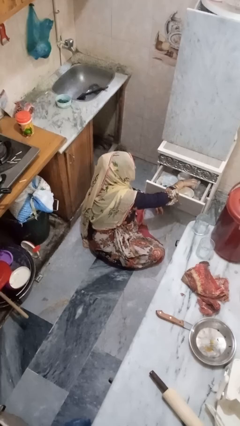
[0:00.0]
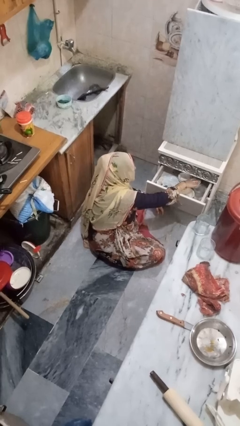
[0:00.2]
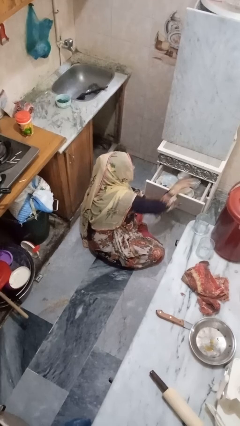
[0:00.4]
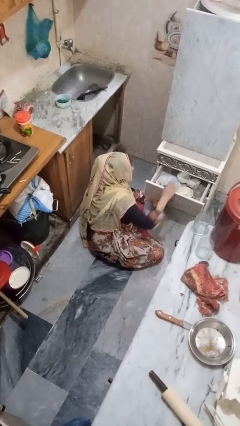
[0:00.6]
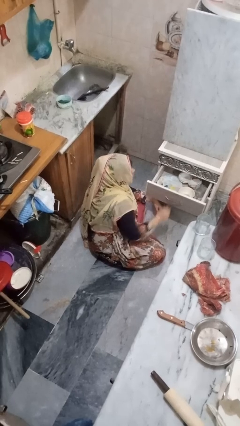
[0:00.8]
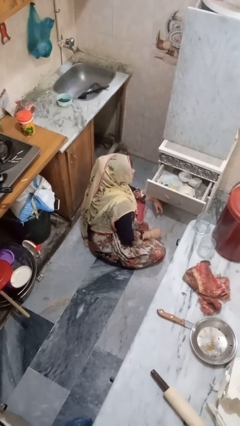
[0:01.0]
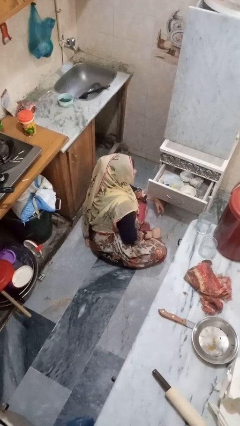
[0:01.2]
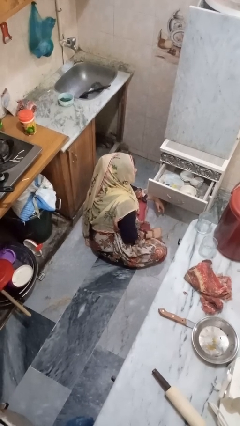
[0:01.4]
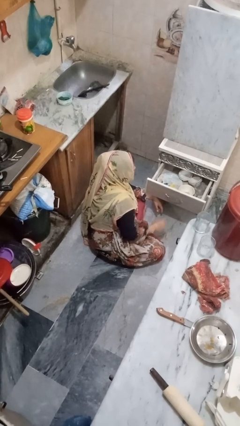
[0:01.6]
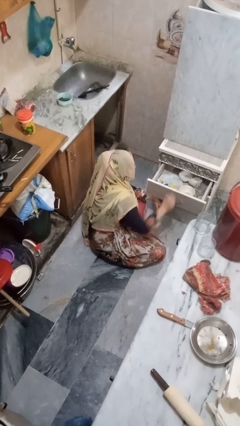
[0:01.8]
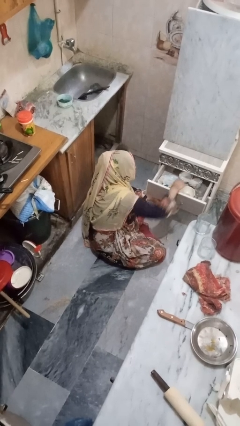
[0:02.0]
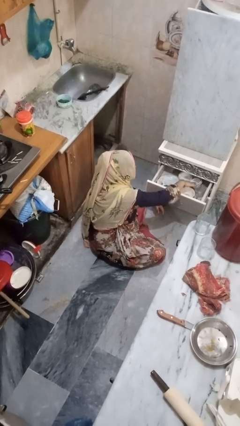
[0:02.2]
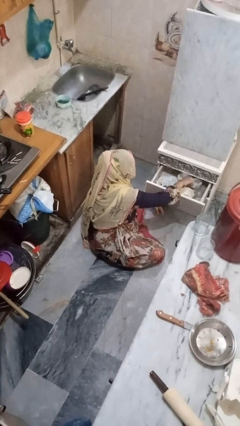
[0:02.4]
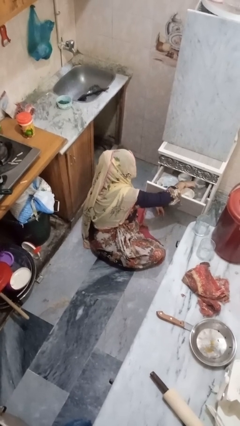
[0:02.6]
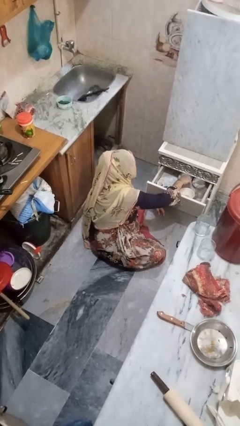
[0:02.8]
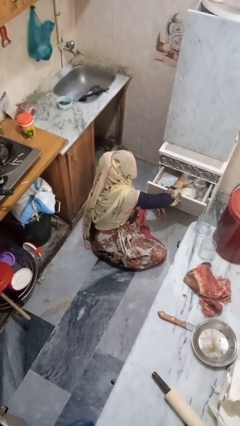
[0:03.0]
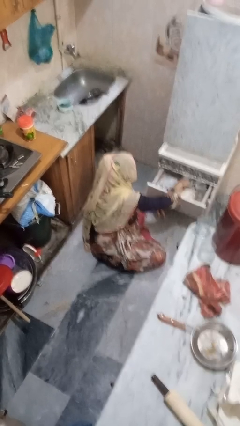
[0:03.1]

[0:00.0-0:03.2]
person searches in kitchen drawer

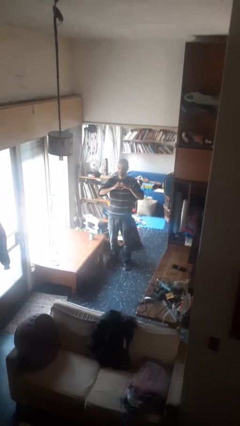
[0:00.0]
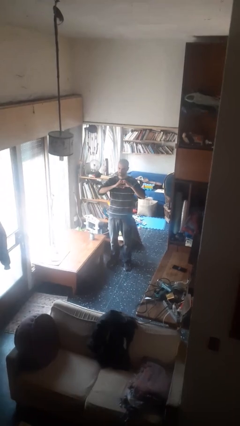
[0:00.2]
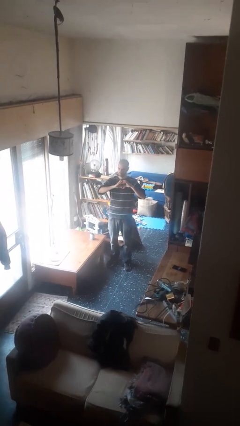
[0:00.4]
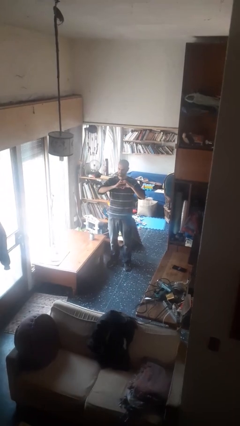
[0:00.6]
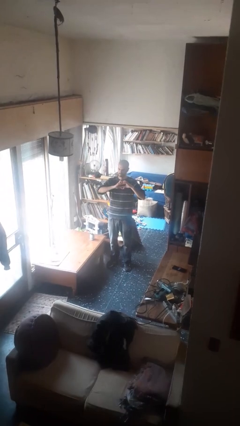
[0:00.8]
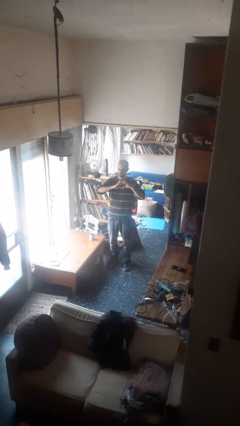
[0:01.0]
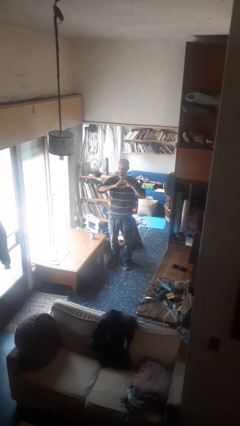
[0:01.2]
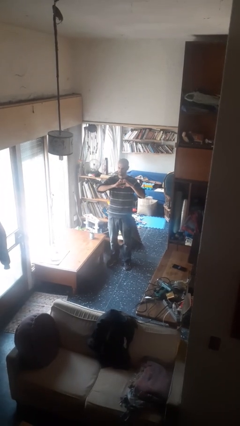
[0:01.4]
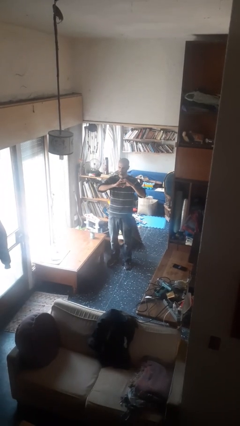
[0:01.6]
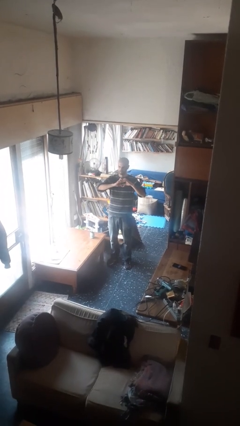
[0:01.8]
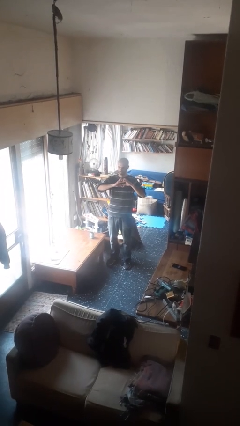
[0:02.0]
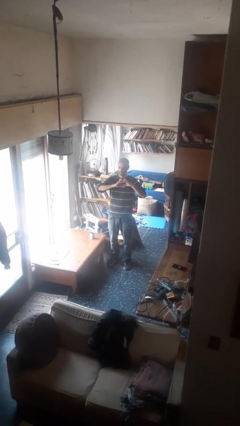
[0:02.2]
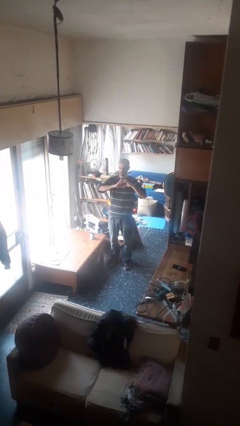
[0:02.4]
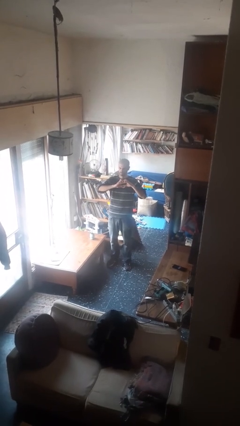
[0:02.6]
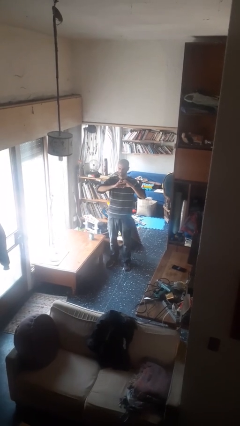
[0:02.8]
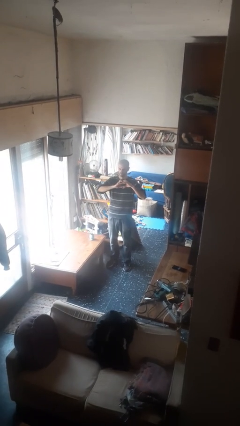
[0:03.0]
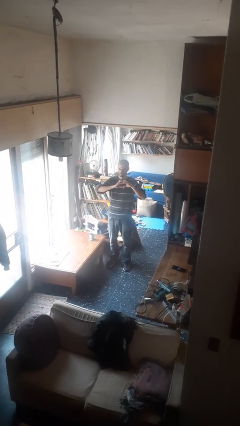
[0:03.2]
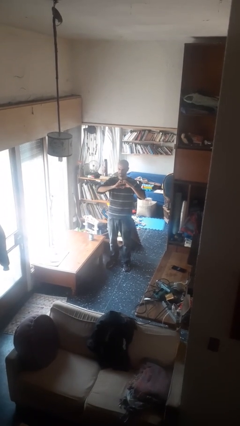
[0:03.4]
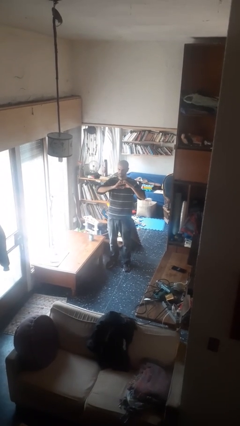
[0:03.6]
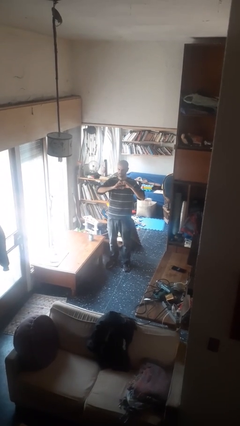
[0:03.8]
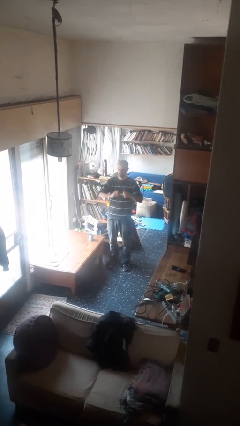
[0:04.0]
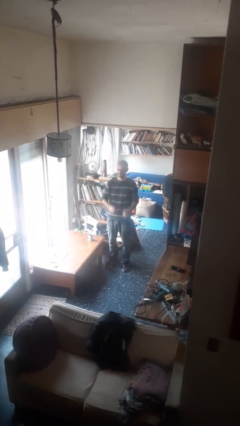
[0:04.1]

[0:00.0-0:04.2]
person gestures heart

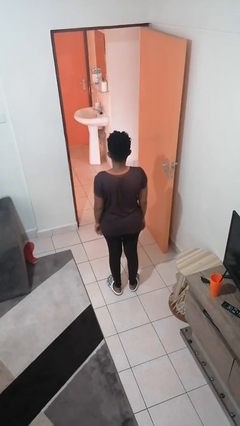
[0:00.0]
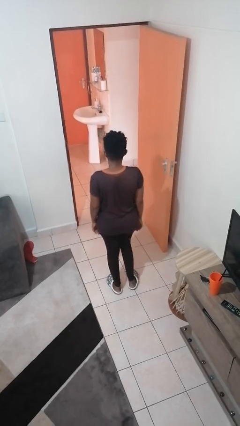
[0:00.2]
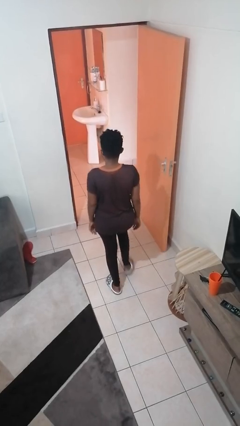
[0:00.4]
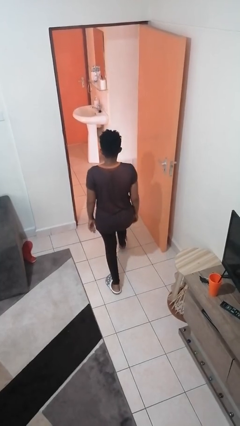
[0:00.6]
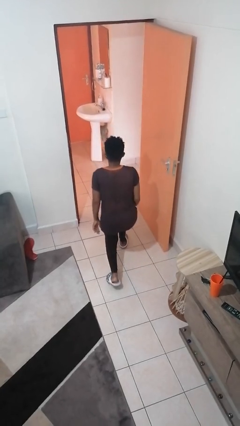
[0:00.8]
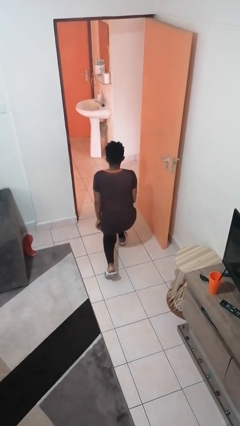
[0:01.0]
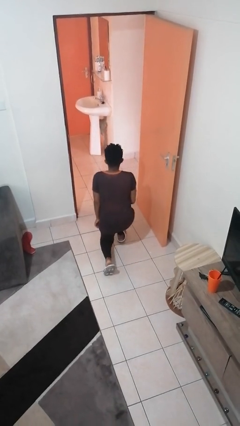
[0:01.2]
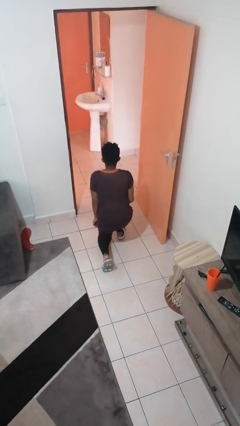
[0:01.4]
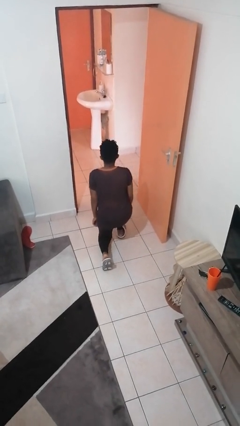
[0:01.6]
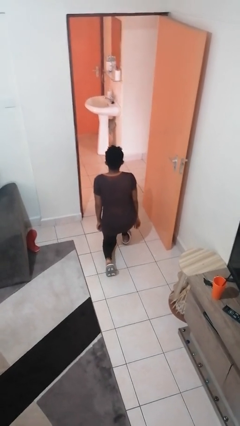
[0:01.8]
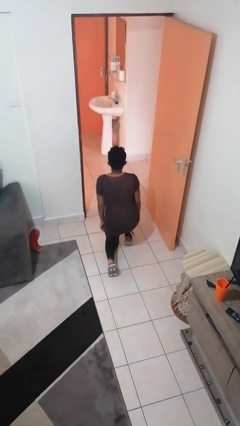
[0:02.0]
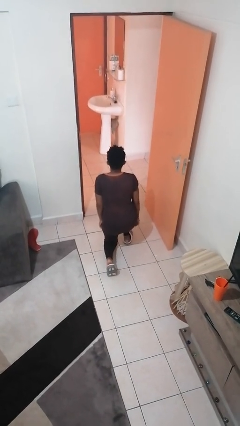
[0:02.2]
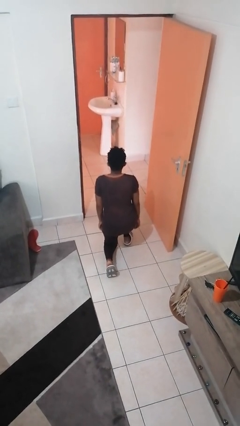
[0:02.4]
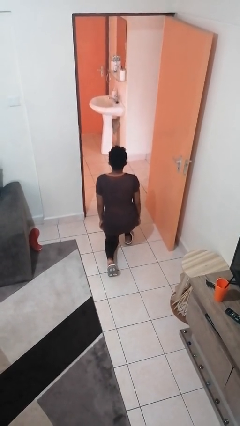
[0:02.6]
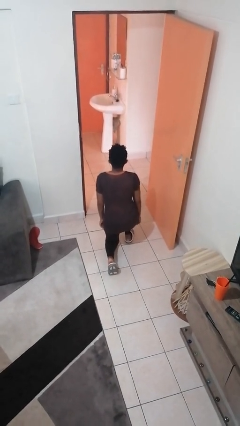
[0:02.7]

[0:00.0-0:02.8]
person kneels

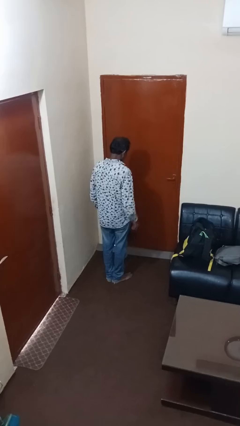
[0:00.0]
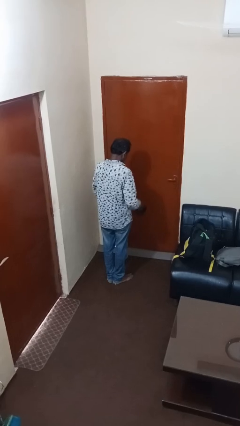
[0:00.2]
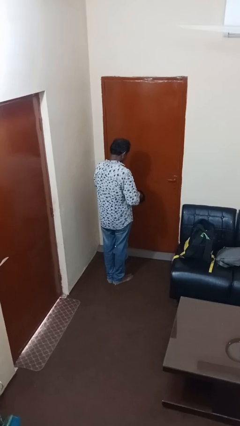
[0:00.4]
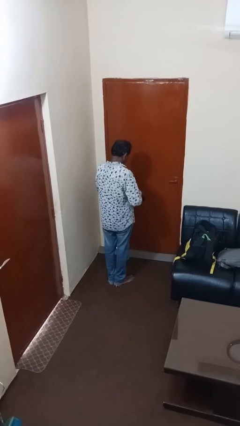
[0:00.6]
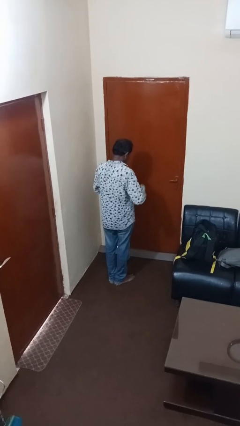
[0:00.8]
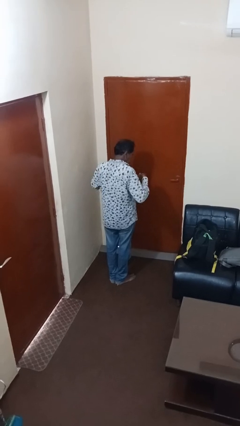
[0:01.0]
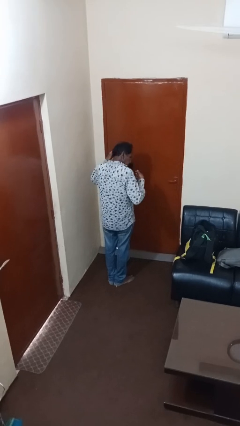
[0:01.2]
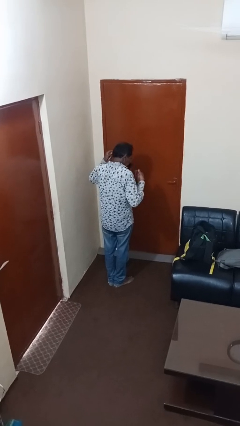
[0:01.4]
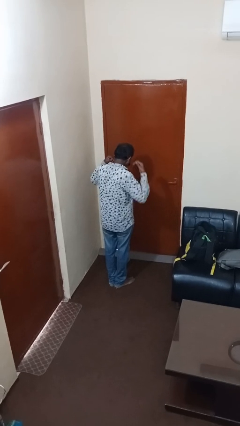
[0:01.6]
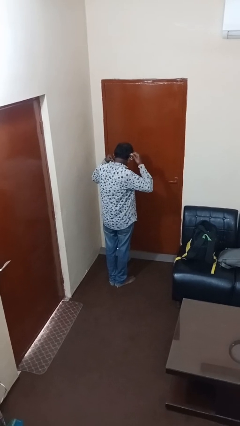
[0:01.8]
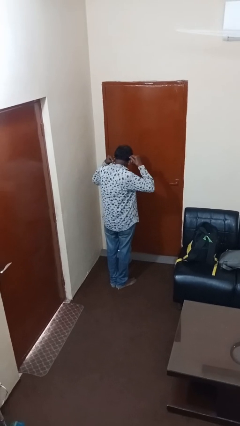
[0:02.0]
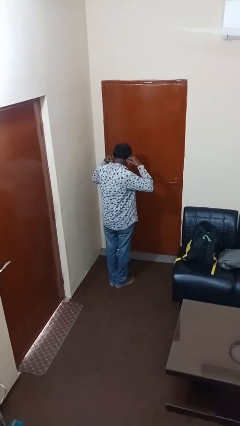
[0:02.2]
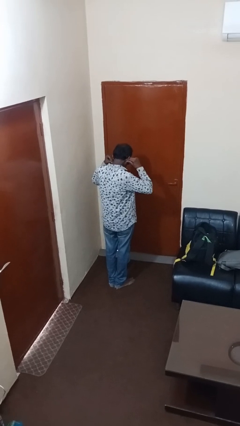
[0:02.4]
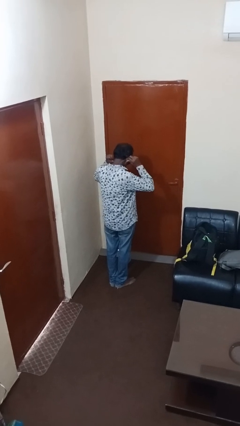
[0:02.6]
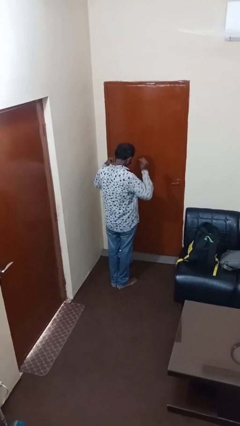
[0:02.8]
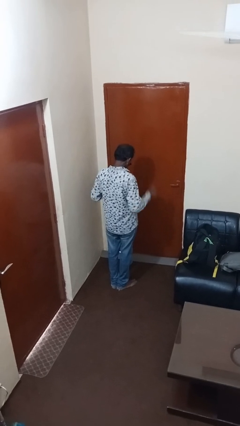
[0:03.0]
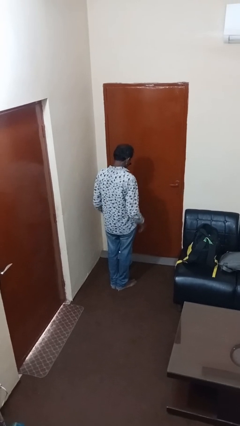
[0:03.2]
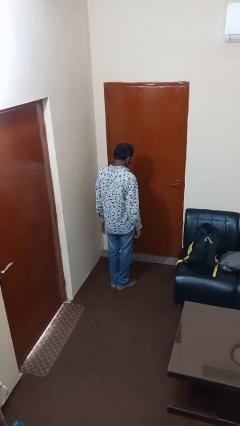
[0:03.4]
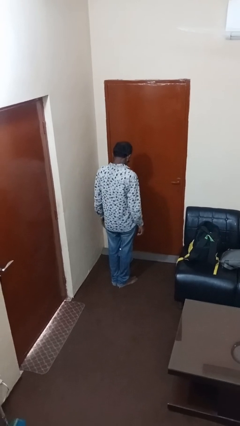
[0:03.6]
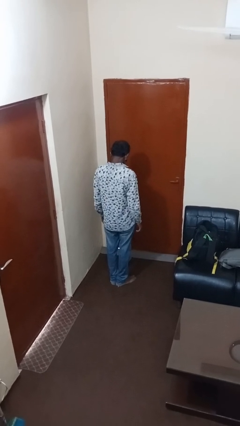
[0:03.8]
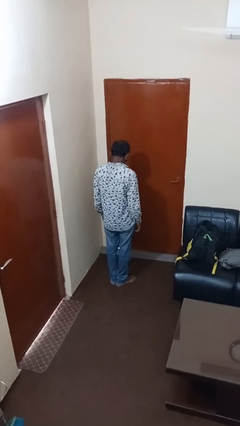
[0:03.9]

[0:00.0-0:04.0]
person puts on facemask

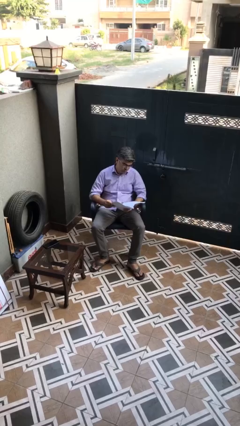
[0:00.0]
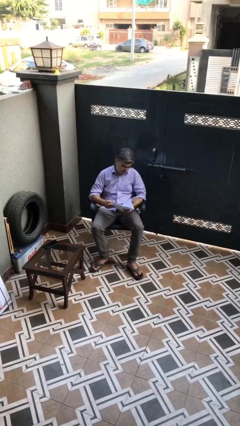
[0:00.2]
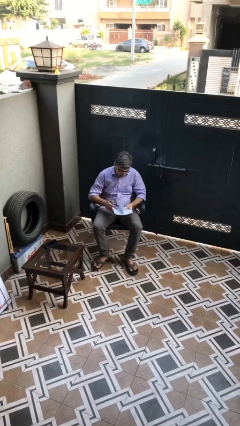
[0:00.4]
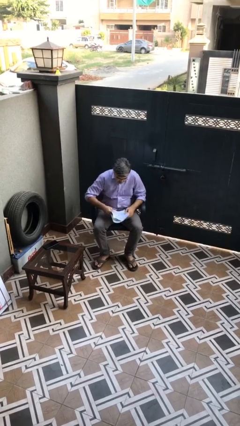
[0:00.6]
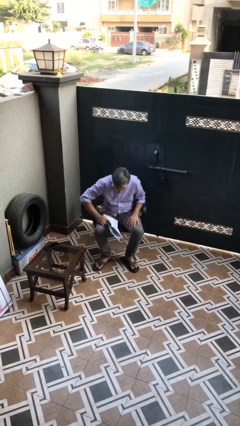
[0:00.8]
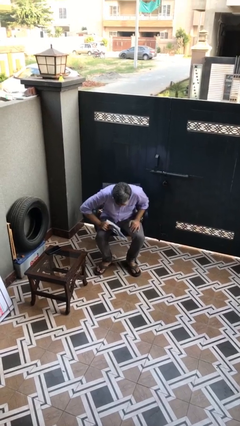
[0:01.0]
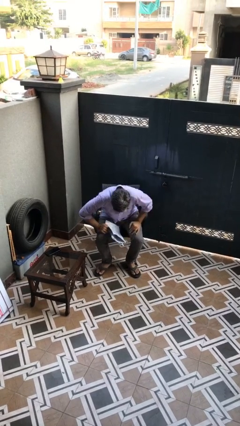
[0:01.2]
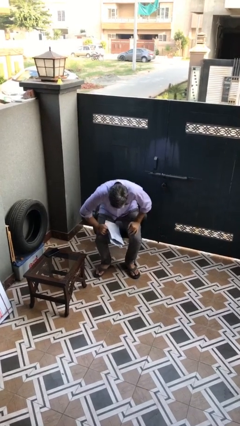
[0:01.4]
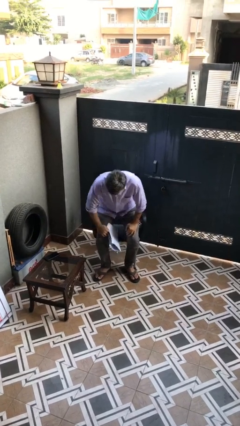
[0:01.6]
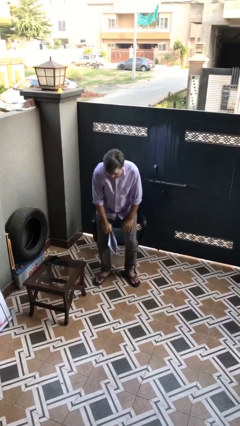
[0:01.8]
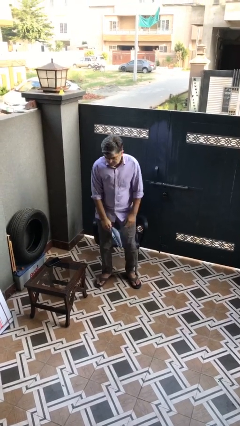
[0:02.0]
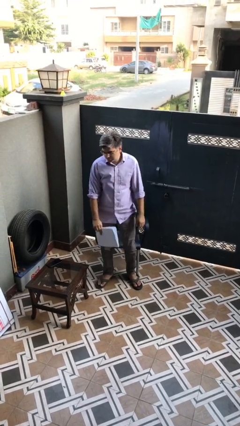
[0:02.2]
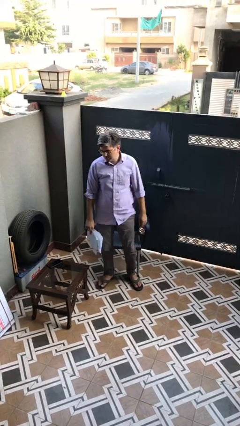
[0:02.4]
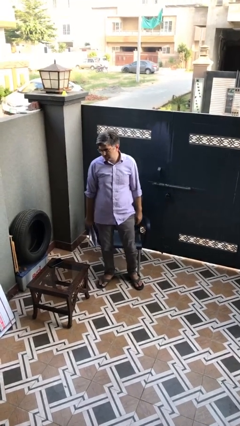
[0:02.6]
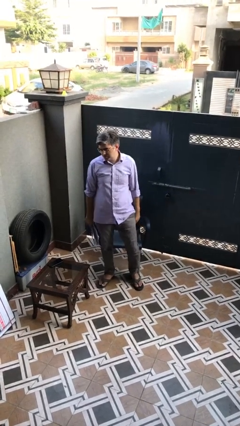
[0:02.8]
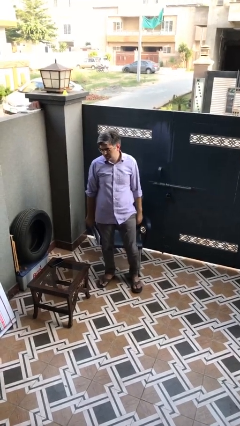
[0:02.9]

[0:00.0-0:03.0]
person stands up
